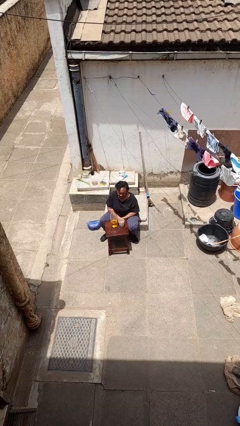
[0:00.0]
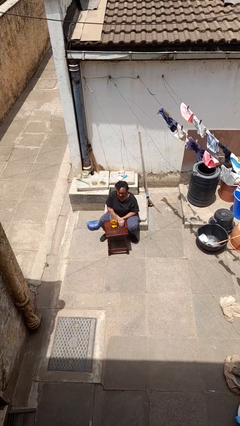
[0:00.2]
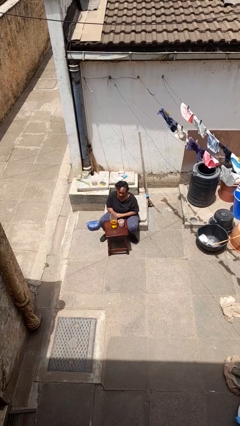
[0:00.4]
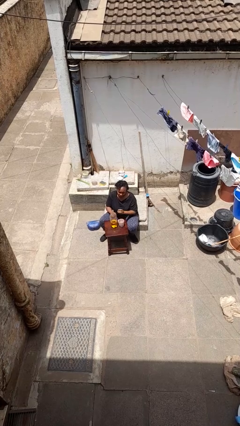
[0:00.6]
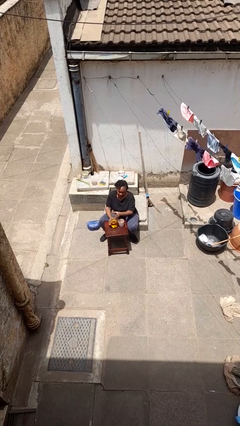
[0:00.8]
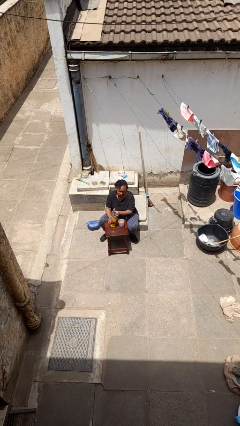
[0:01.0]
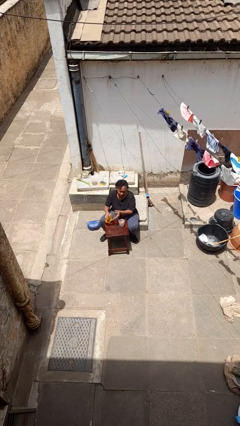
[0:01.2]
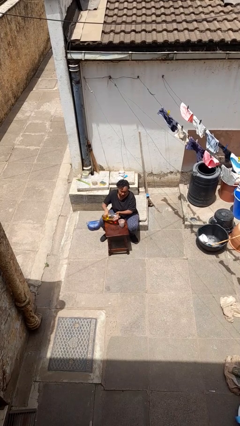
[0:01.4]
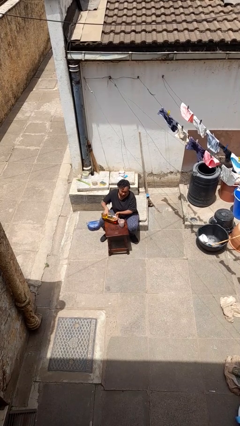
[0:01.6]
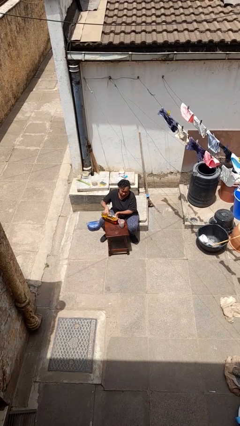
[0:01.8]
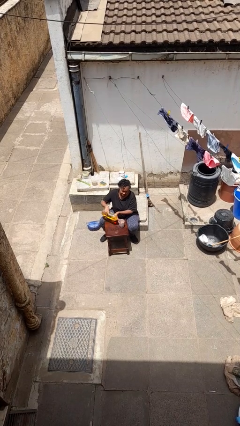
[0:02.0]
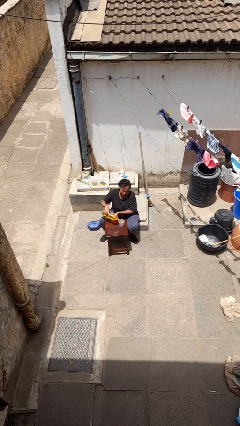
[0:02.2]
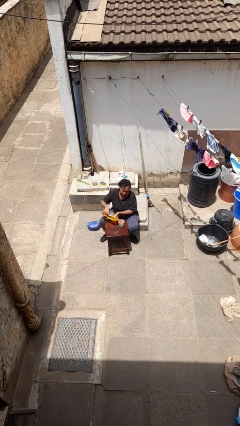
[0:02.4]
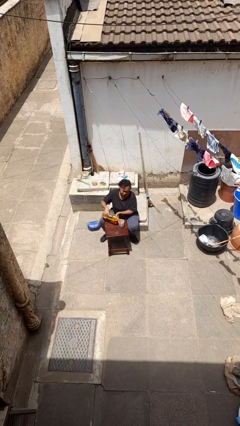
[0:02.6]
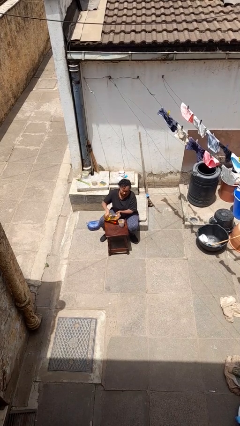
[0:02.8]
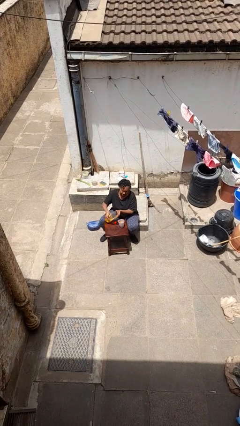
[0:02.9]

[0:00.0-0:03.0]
person pours liquid into cup

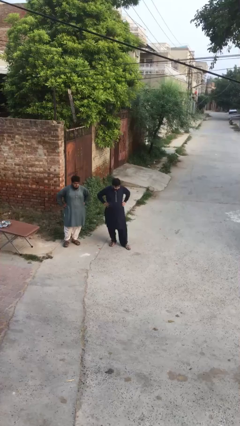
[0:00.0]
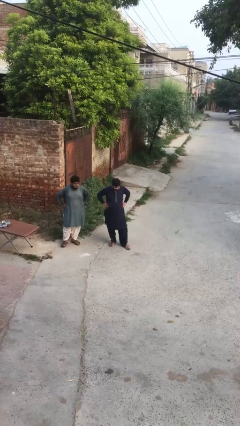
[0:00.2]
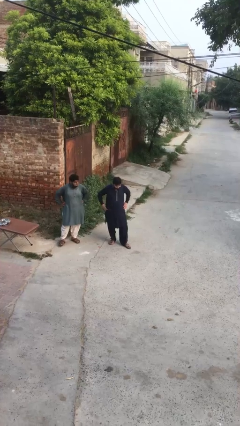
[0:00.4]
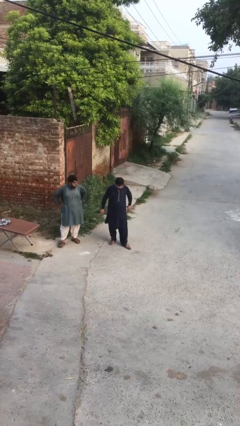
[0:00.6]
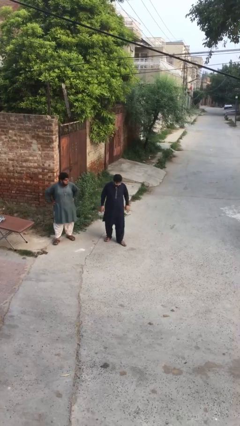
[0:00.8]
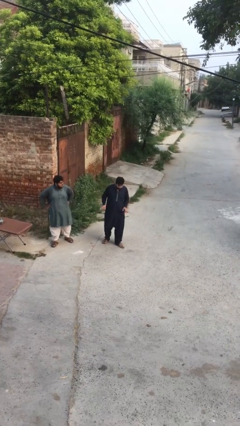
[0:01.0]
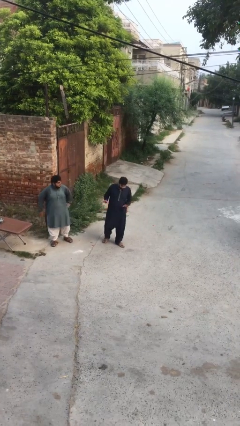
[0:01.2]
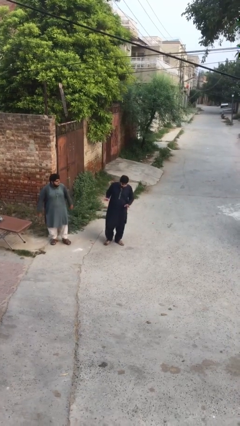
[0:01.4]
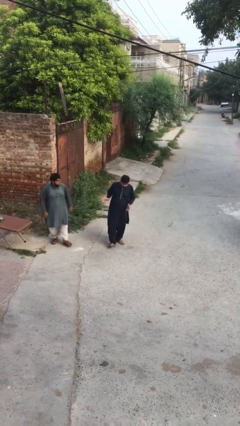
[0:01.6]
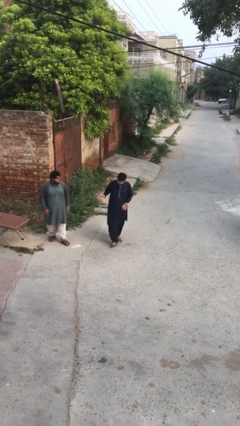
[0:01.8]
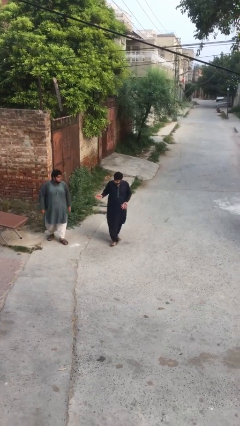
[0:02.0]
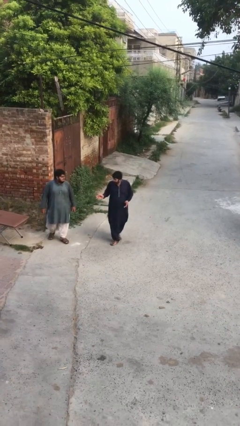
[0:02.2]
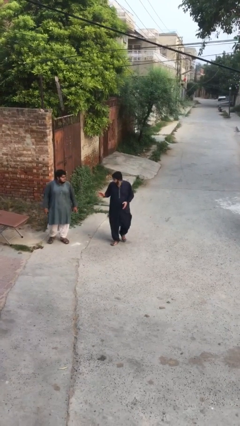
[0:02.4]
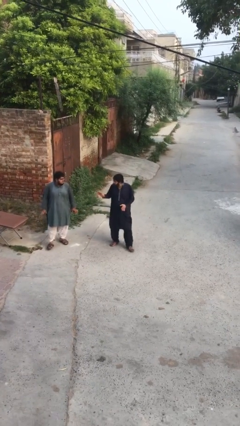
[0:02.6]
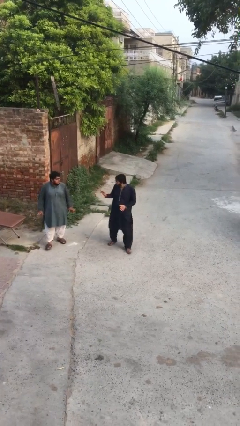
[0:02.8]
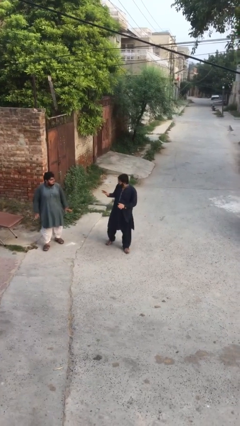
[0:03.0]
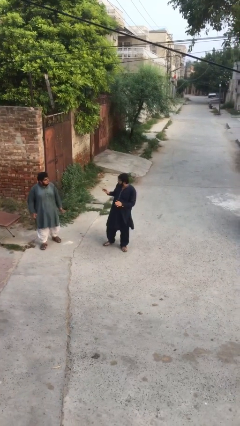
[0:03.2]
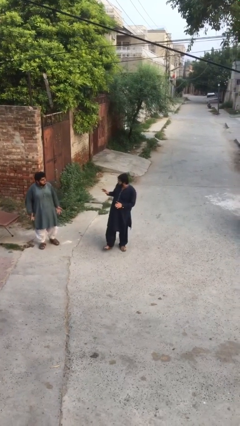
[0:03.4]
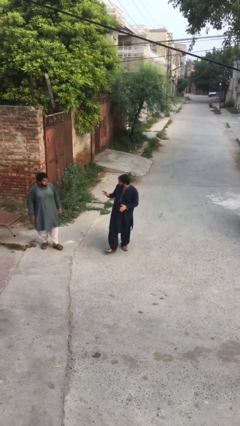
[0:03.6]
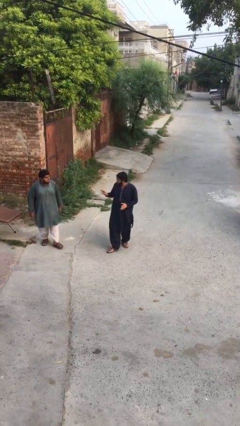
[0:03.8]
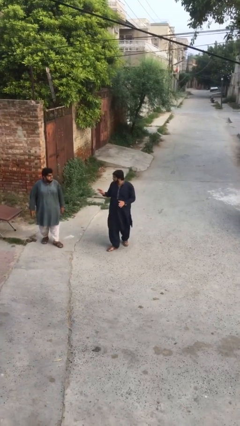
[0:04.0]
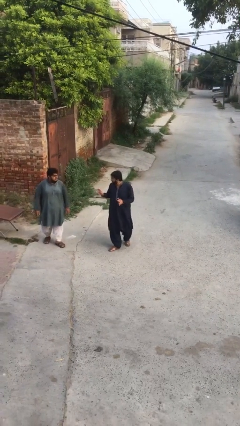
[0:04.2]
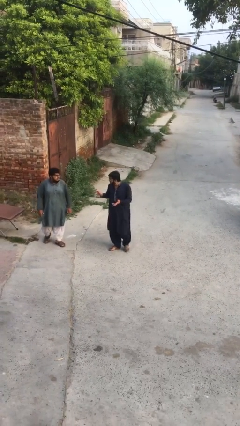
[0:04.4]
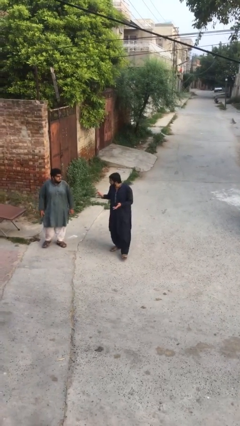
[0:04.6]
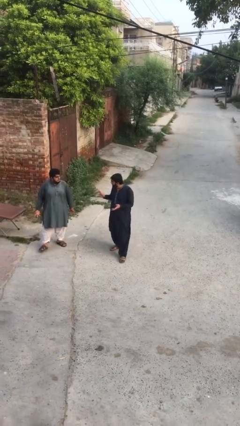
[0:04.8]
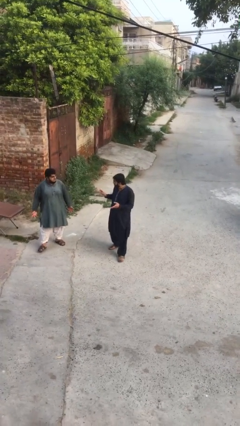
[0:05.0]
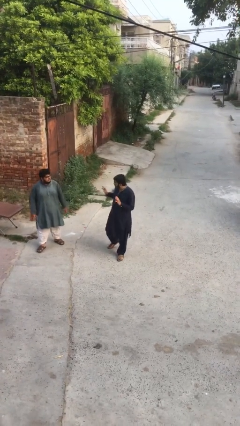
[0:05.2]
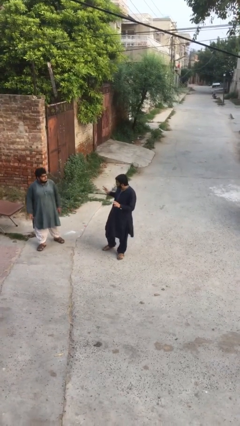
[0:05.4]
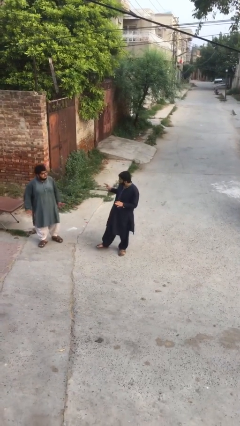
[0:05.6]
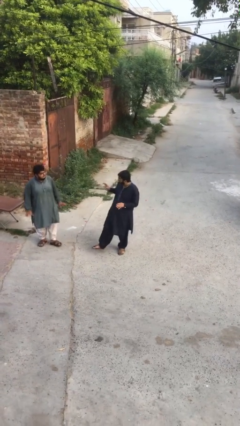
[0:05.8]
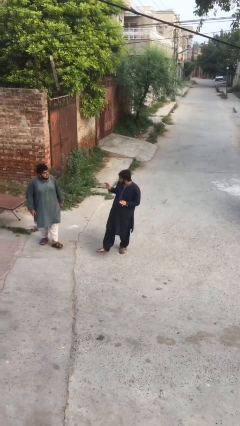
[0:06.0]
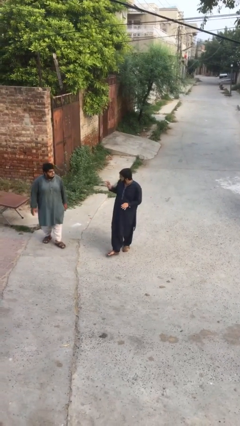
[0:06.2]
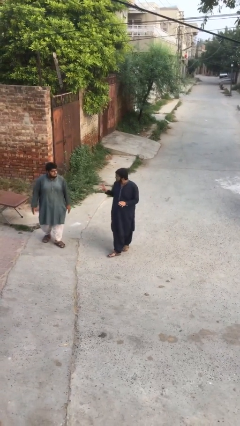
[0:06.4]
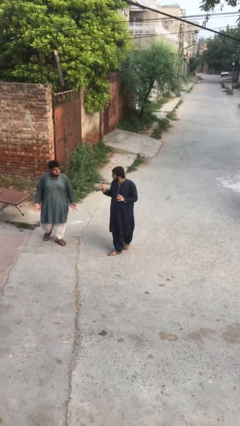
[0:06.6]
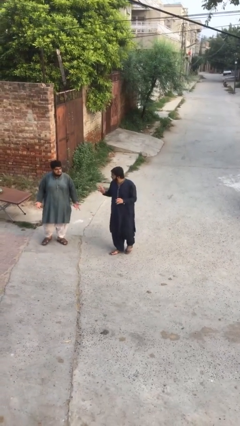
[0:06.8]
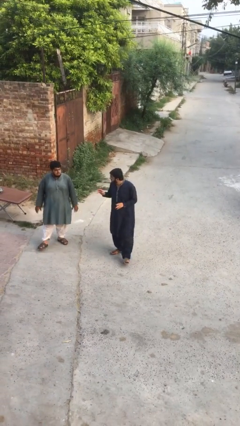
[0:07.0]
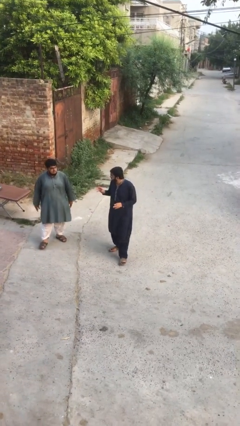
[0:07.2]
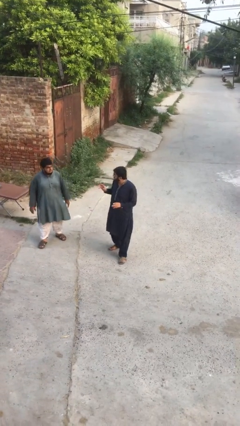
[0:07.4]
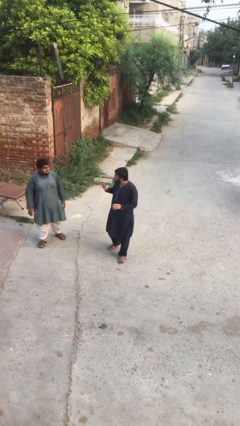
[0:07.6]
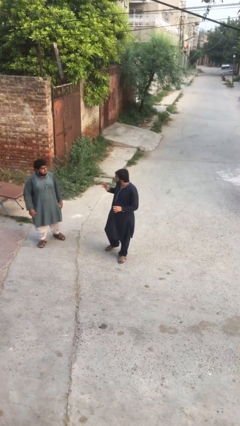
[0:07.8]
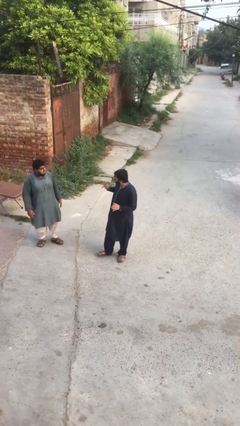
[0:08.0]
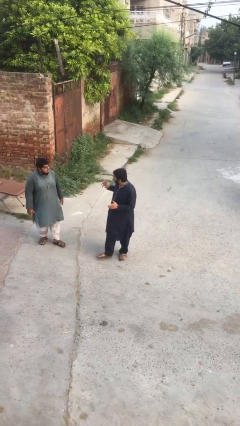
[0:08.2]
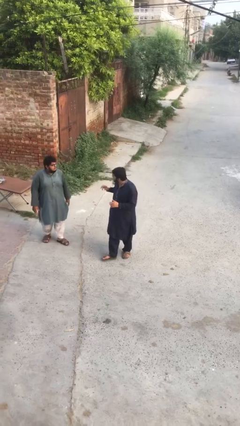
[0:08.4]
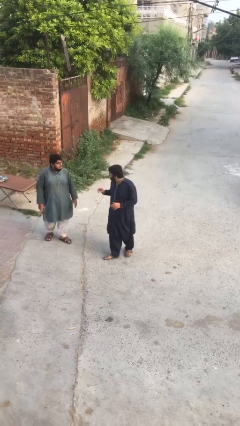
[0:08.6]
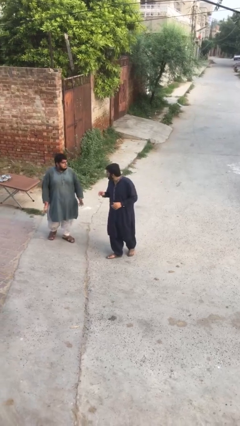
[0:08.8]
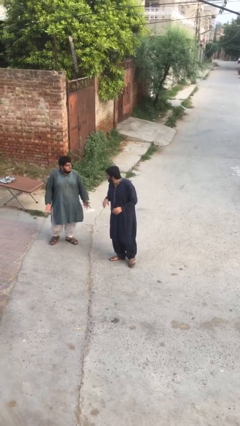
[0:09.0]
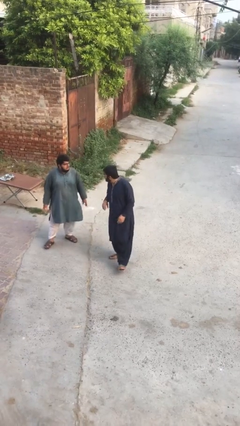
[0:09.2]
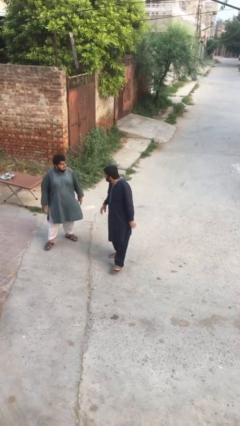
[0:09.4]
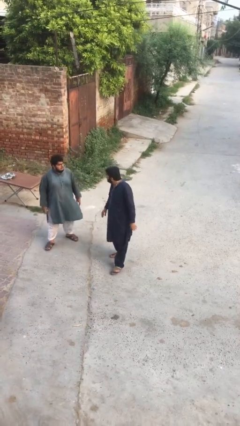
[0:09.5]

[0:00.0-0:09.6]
person talks to person

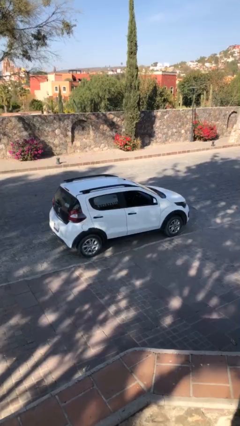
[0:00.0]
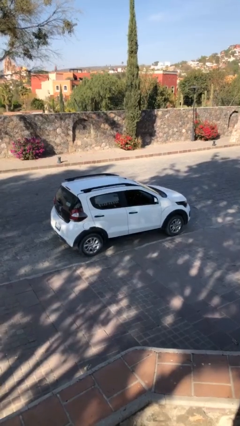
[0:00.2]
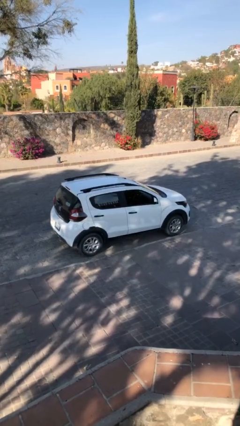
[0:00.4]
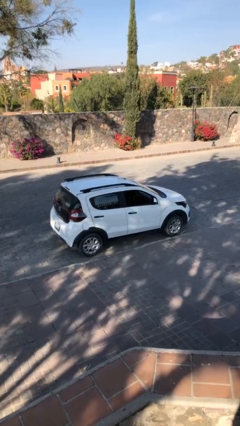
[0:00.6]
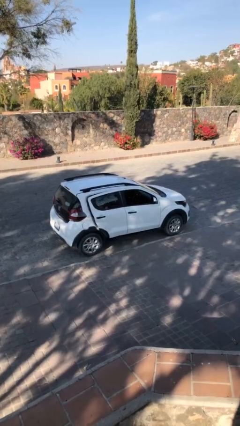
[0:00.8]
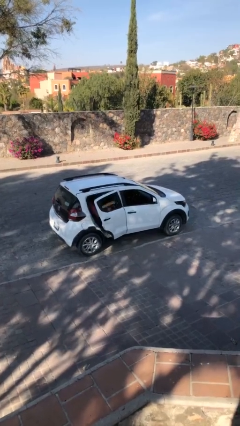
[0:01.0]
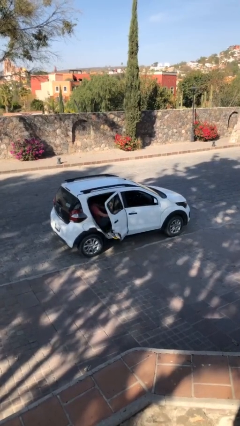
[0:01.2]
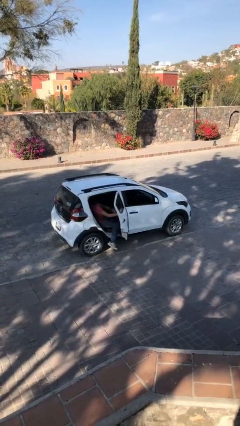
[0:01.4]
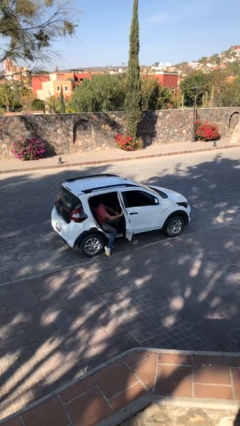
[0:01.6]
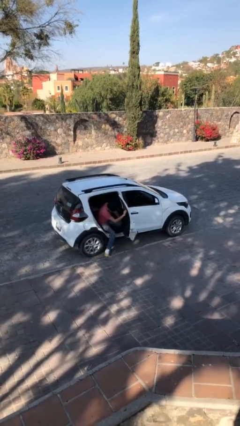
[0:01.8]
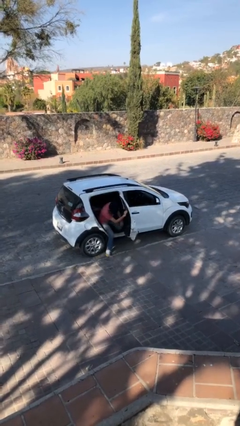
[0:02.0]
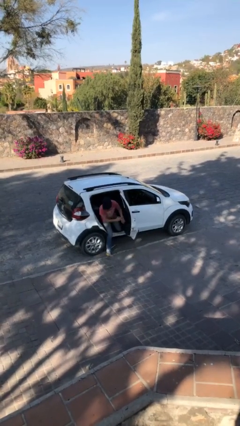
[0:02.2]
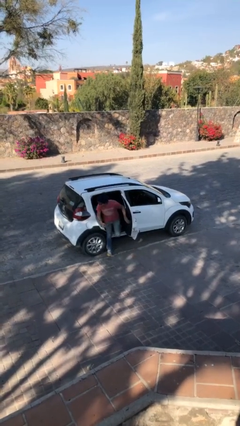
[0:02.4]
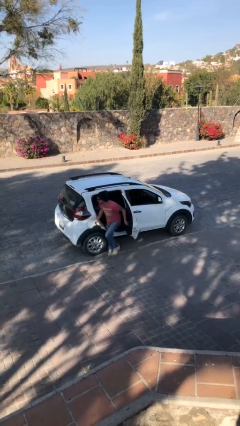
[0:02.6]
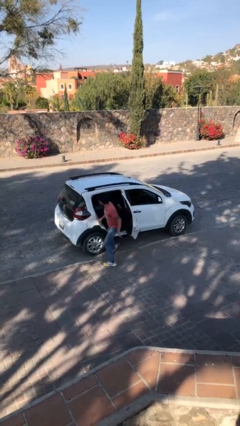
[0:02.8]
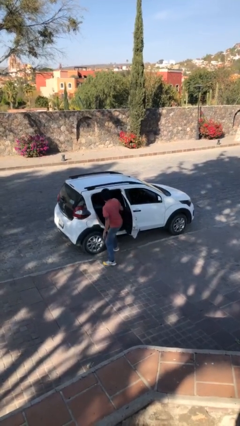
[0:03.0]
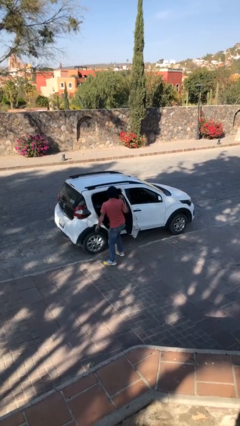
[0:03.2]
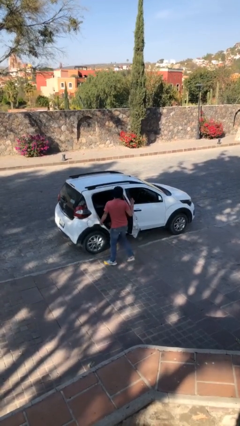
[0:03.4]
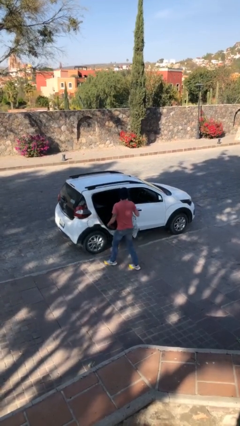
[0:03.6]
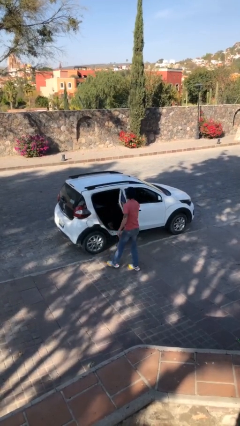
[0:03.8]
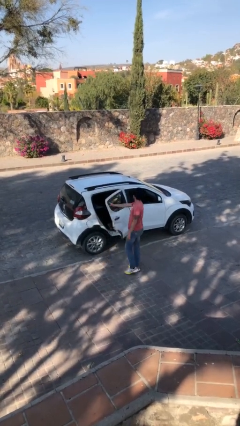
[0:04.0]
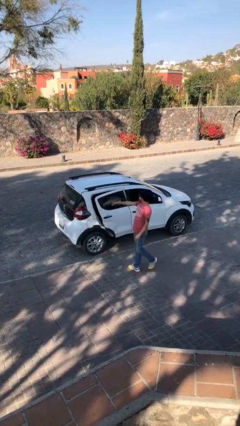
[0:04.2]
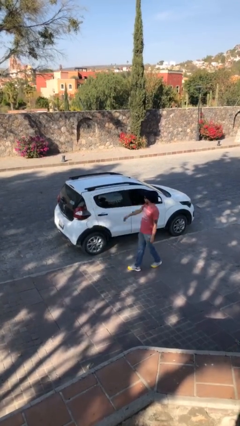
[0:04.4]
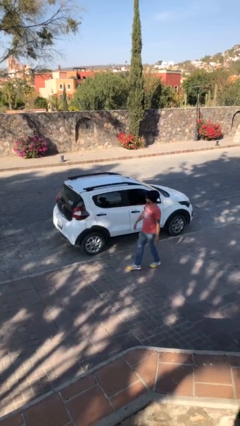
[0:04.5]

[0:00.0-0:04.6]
car drops off person

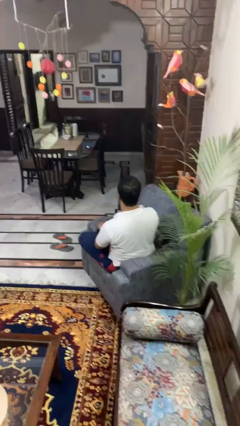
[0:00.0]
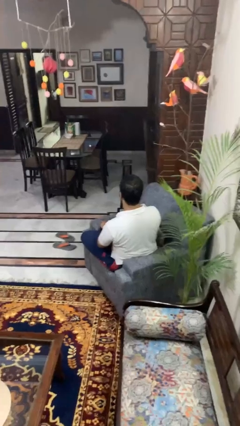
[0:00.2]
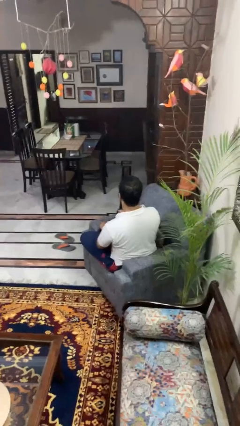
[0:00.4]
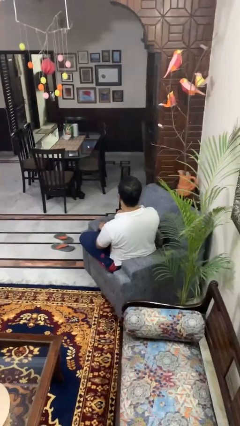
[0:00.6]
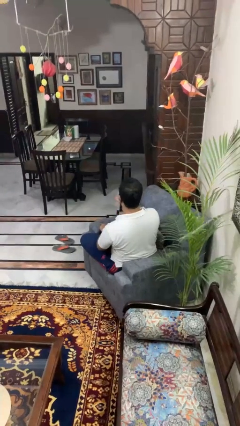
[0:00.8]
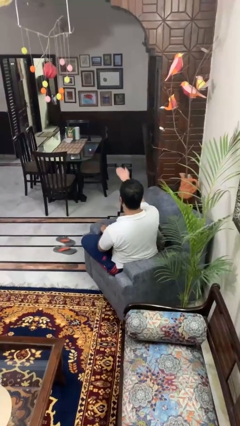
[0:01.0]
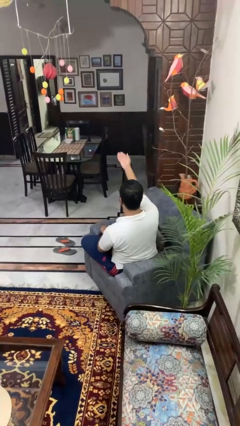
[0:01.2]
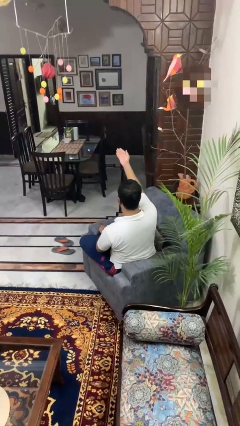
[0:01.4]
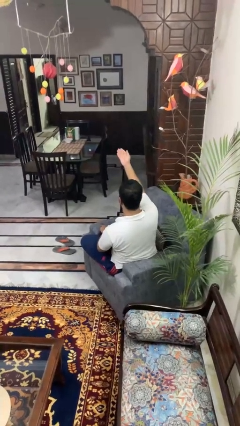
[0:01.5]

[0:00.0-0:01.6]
person gestures swipe up
